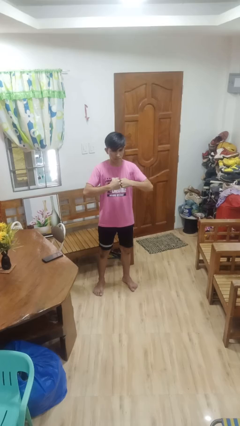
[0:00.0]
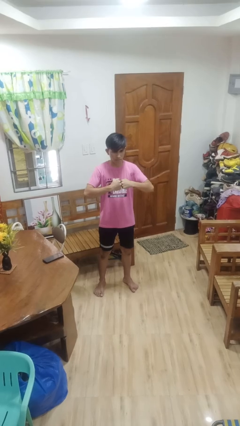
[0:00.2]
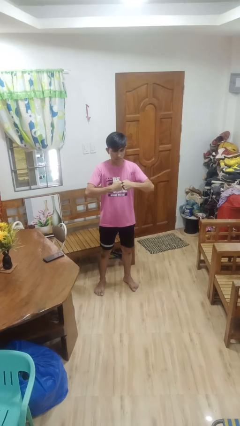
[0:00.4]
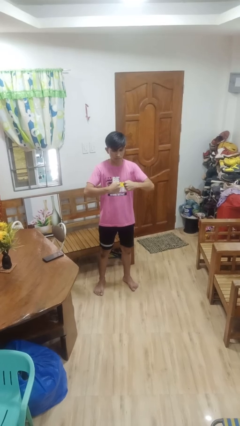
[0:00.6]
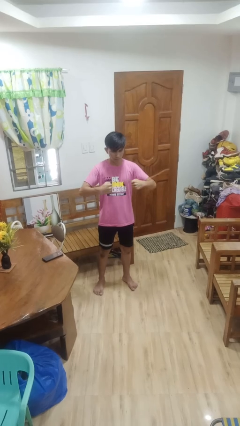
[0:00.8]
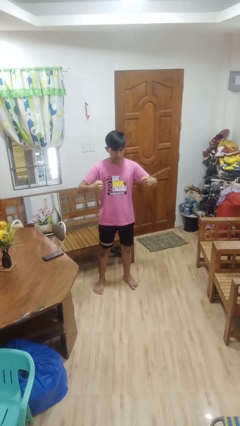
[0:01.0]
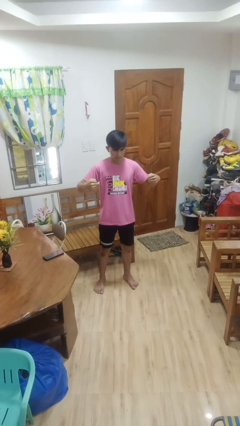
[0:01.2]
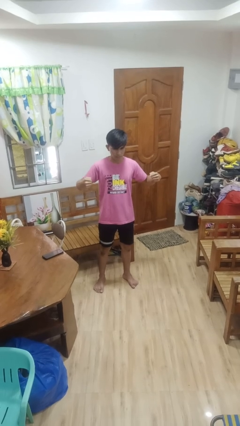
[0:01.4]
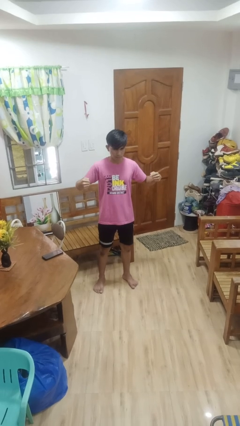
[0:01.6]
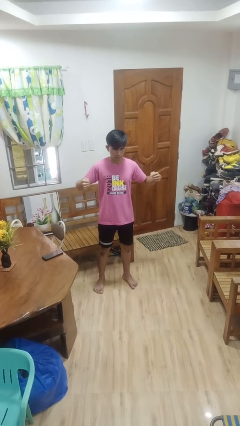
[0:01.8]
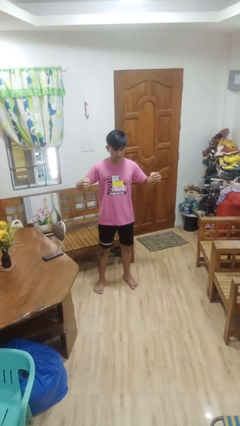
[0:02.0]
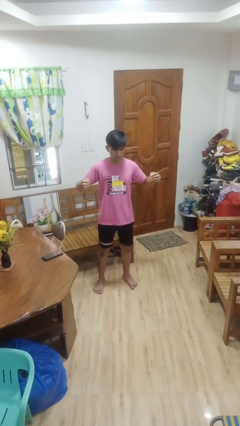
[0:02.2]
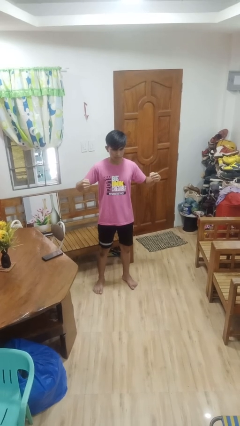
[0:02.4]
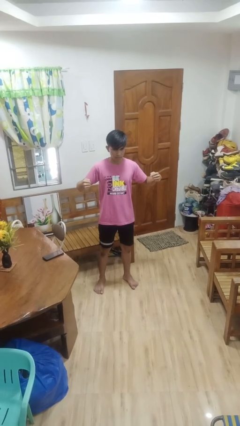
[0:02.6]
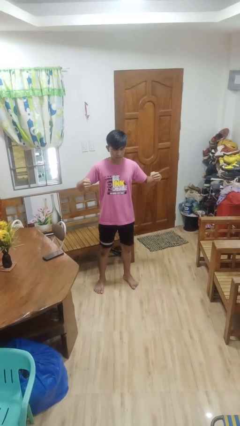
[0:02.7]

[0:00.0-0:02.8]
person gestures zoom in

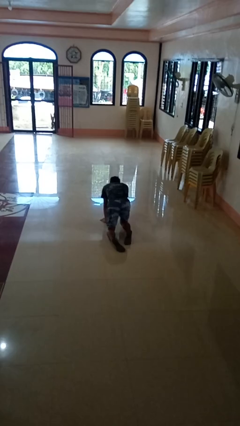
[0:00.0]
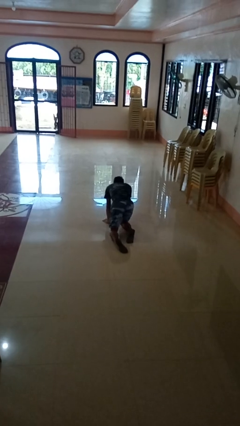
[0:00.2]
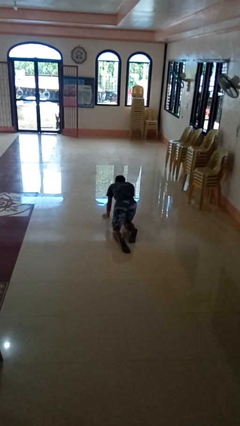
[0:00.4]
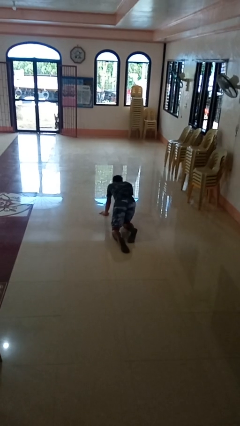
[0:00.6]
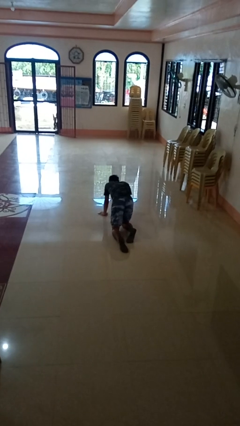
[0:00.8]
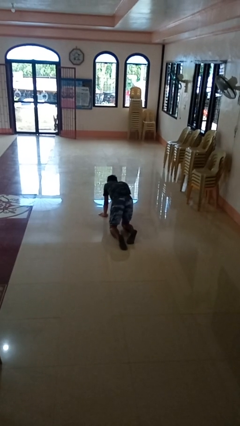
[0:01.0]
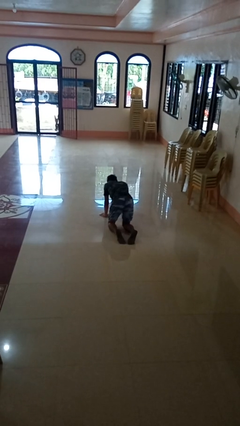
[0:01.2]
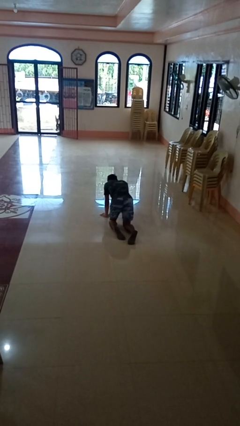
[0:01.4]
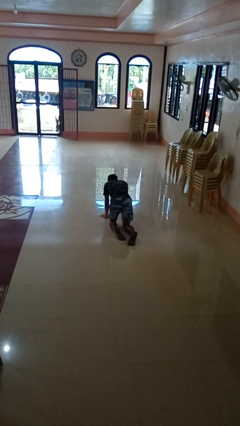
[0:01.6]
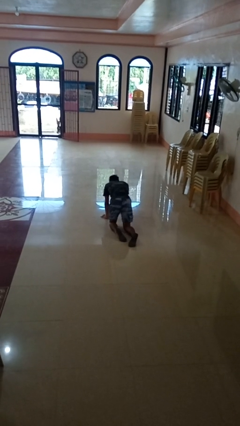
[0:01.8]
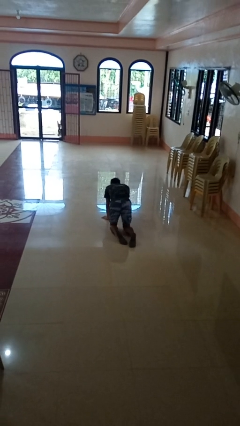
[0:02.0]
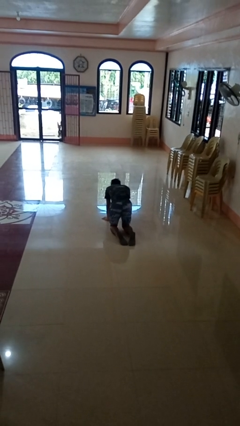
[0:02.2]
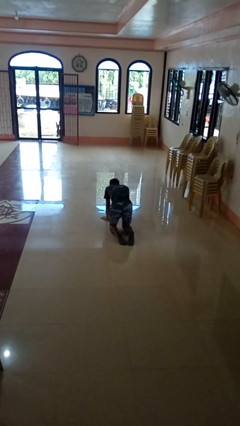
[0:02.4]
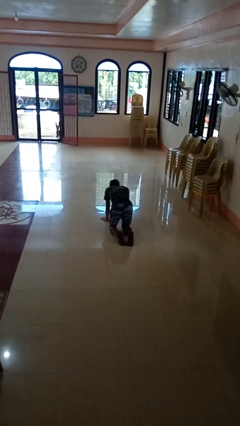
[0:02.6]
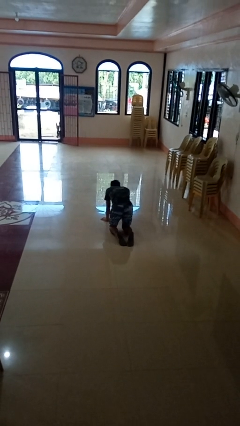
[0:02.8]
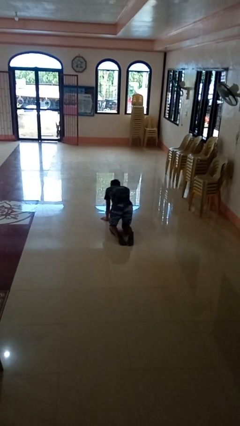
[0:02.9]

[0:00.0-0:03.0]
person crawls

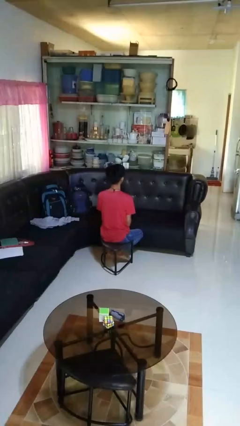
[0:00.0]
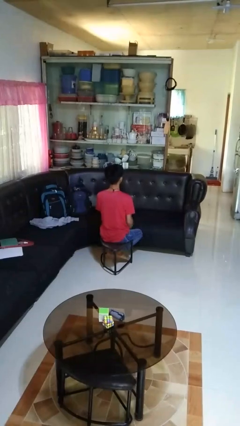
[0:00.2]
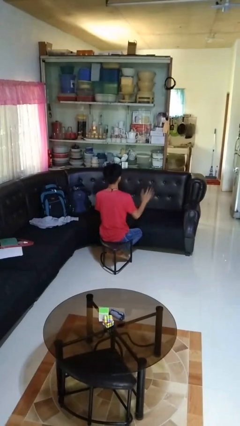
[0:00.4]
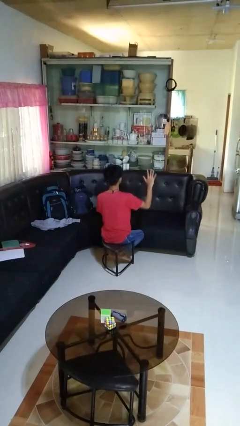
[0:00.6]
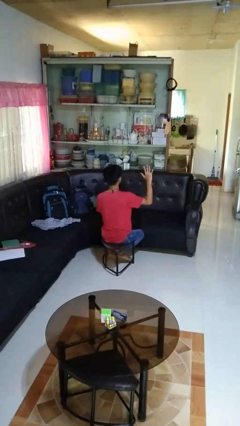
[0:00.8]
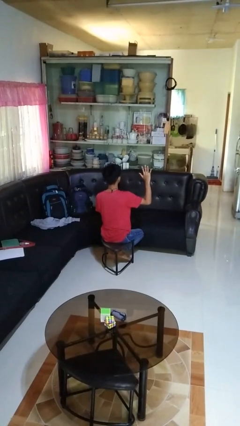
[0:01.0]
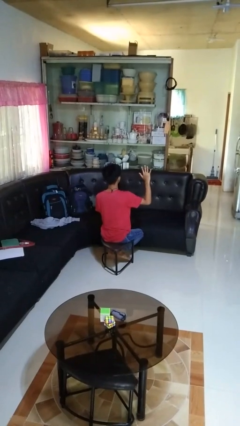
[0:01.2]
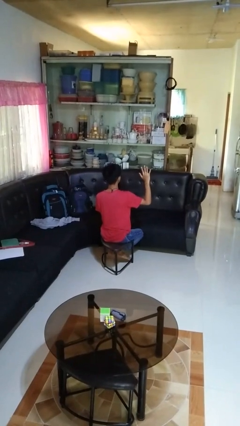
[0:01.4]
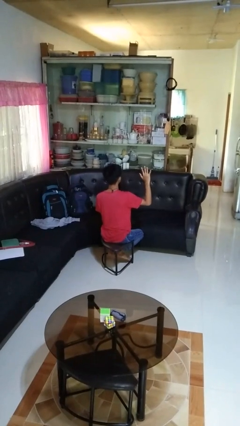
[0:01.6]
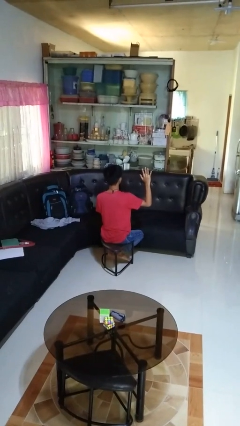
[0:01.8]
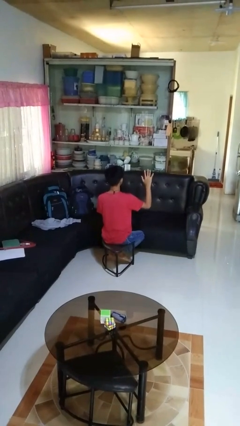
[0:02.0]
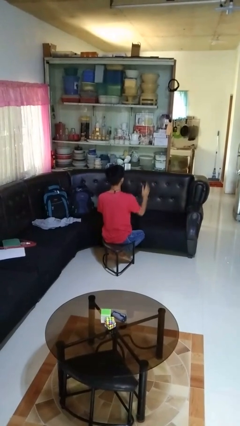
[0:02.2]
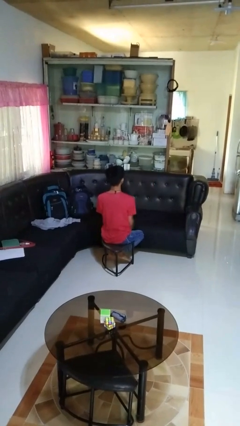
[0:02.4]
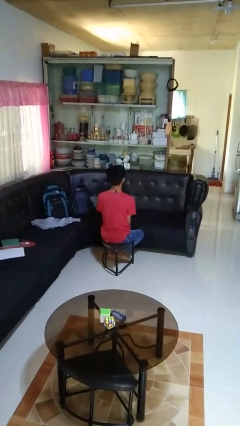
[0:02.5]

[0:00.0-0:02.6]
person gestures number five

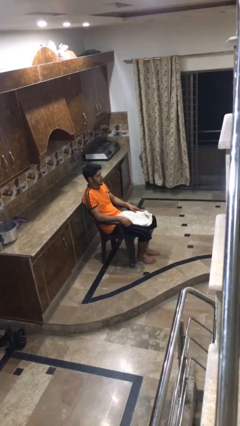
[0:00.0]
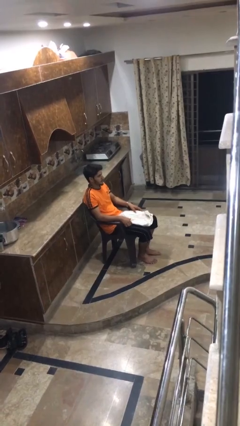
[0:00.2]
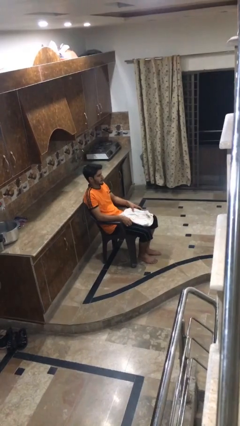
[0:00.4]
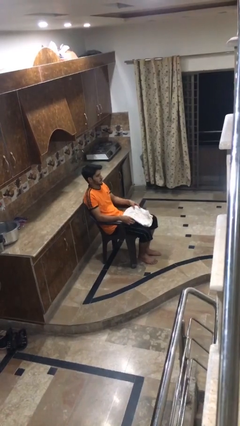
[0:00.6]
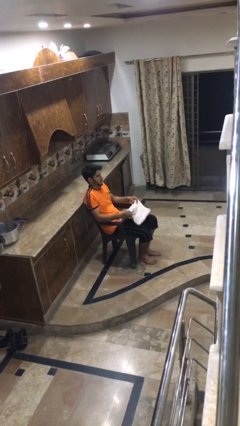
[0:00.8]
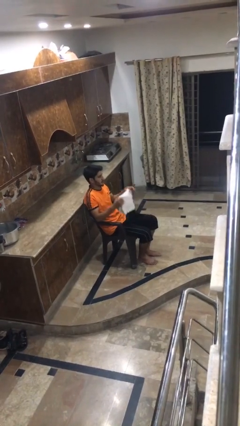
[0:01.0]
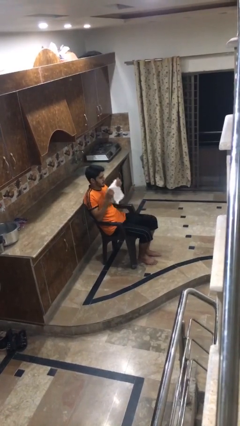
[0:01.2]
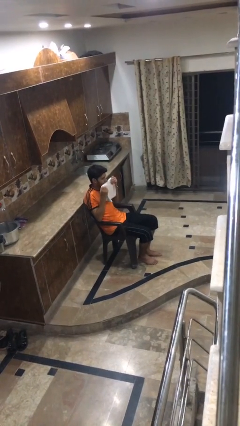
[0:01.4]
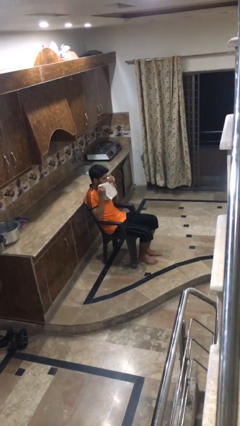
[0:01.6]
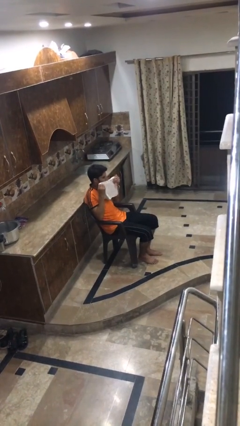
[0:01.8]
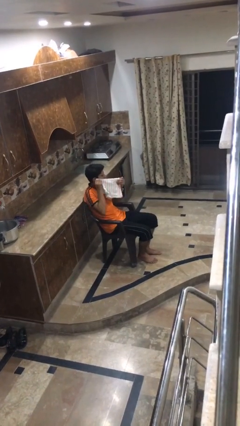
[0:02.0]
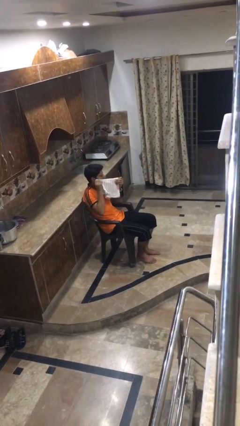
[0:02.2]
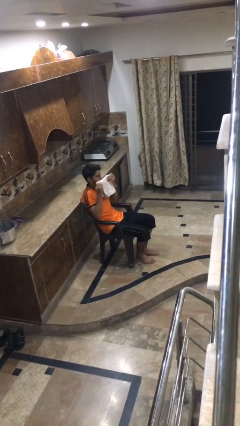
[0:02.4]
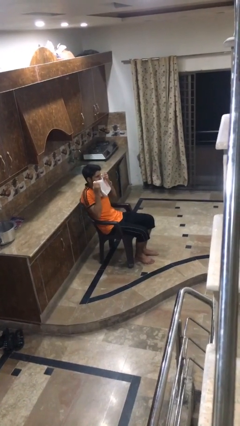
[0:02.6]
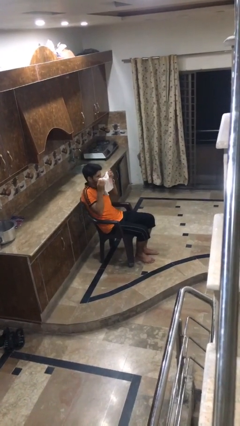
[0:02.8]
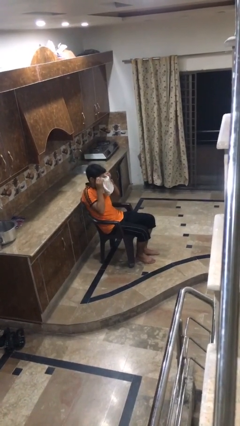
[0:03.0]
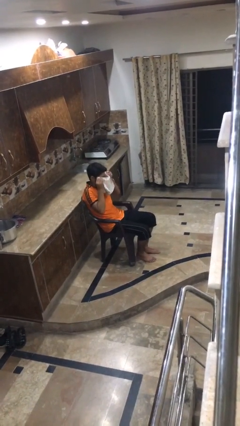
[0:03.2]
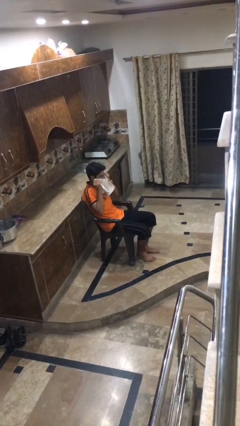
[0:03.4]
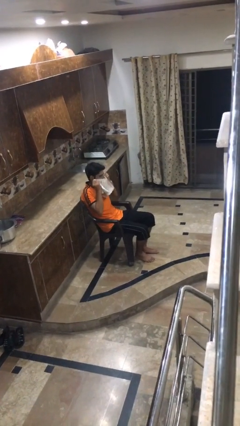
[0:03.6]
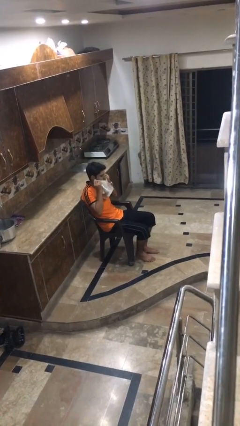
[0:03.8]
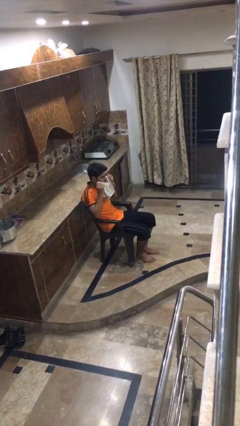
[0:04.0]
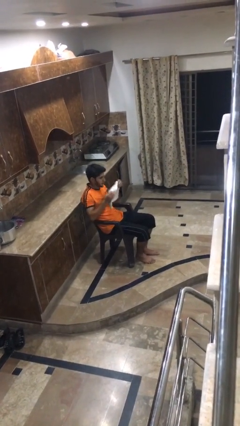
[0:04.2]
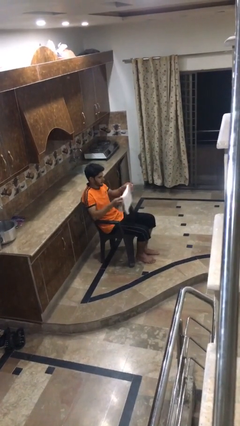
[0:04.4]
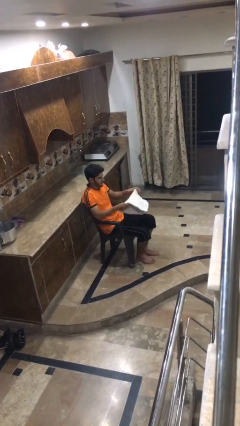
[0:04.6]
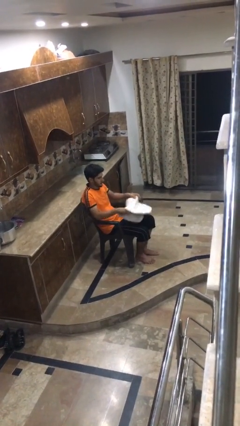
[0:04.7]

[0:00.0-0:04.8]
person wipes mouth with napkin

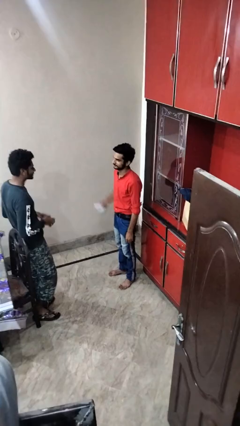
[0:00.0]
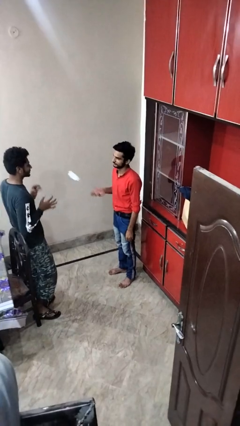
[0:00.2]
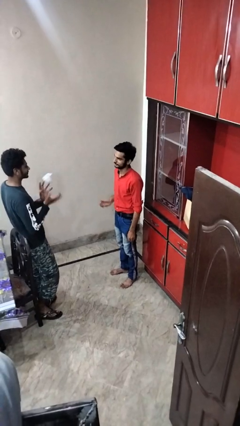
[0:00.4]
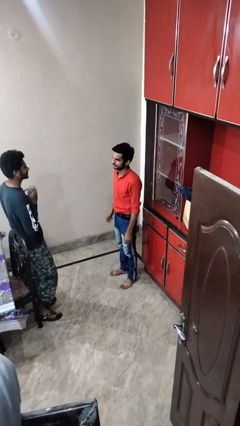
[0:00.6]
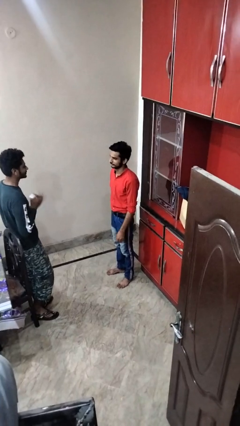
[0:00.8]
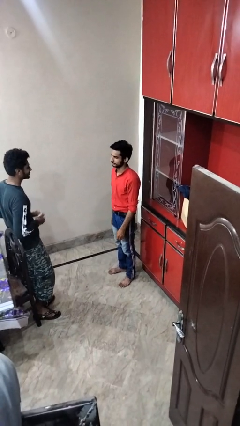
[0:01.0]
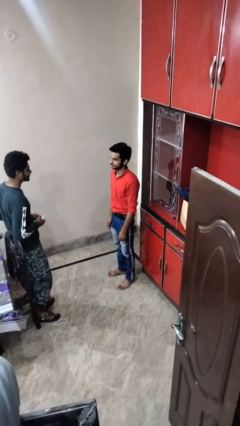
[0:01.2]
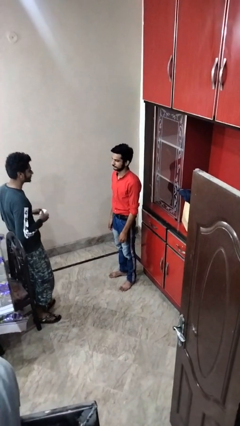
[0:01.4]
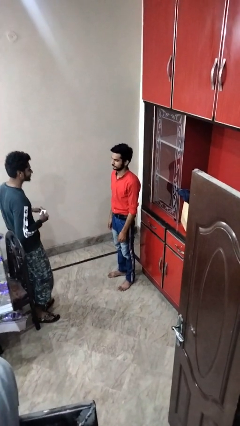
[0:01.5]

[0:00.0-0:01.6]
person throws object to person

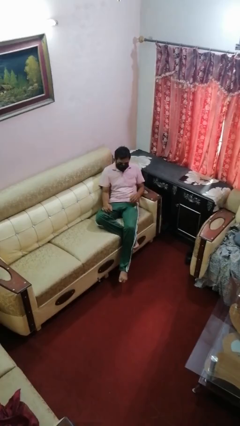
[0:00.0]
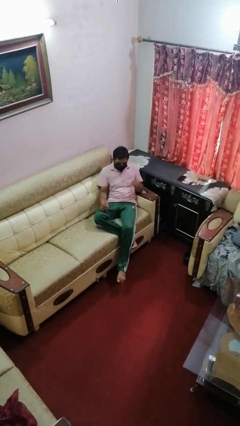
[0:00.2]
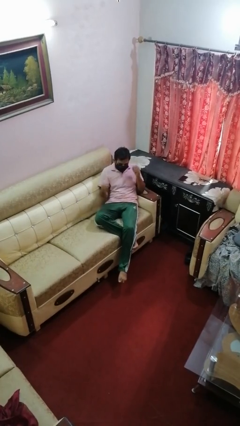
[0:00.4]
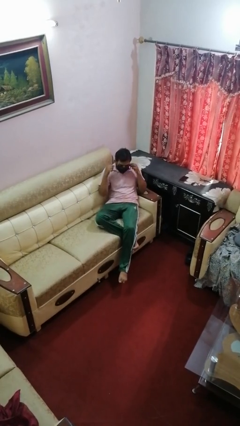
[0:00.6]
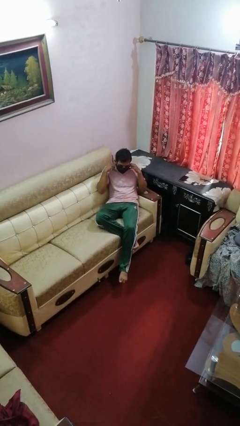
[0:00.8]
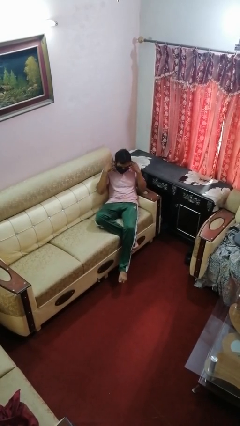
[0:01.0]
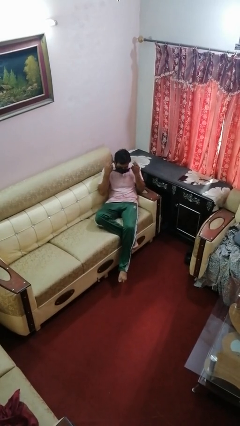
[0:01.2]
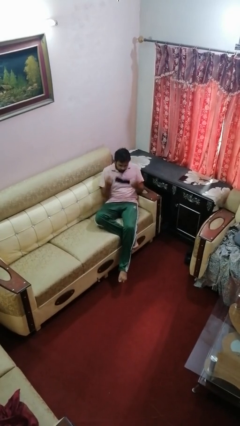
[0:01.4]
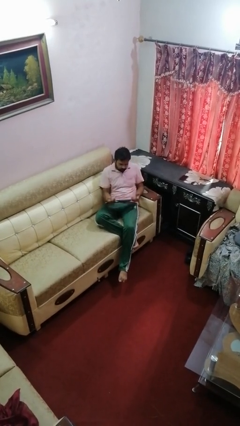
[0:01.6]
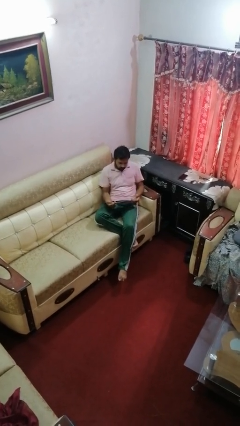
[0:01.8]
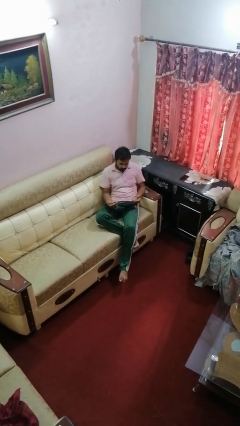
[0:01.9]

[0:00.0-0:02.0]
person takes off facemask
